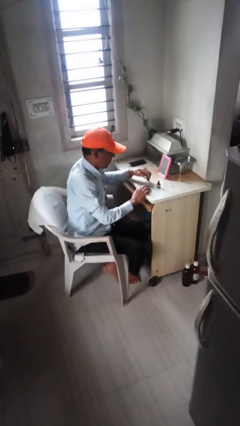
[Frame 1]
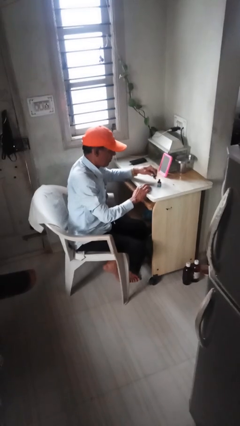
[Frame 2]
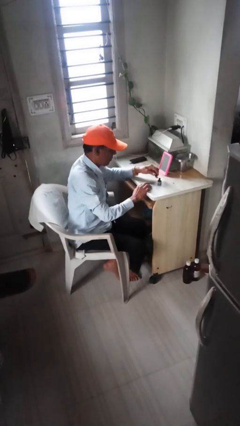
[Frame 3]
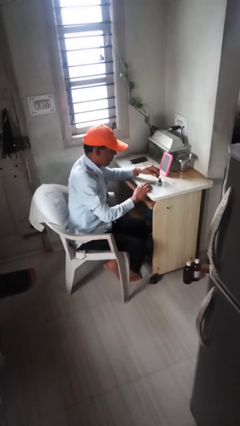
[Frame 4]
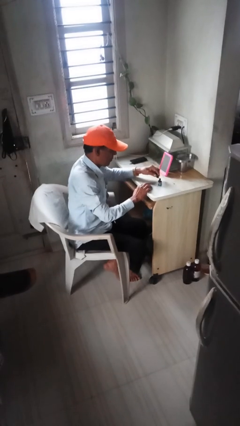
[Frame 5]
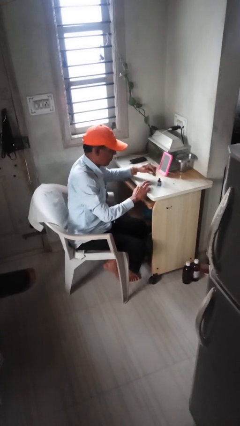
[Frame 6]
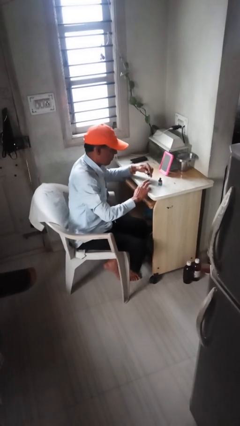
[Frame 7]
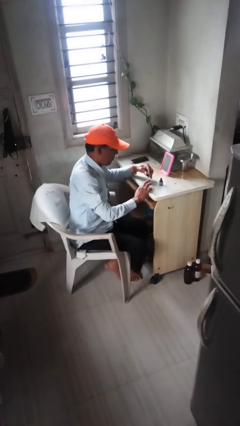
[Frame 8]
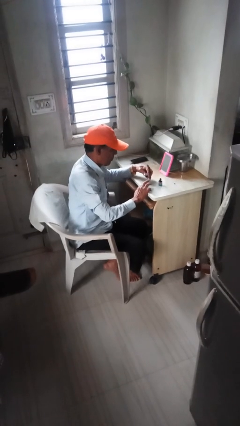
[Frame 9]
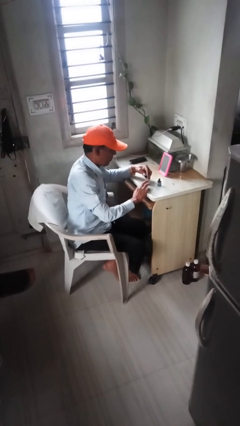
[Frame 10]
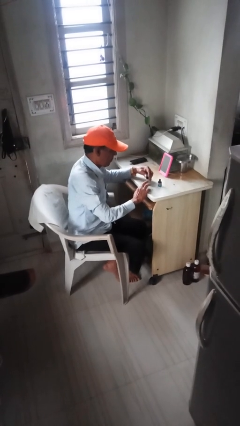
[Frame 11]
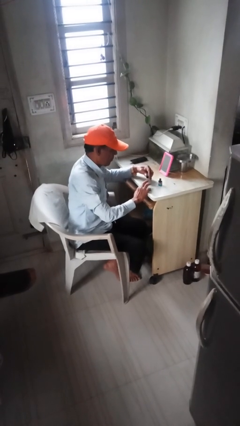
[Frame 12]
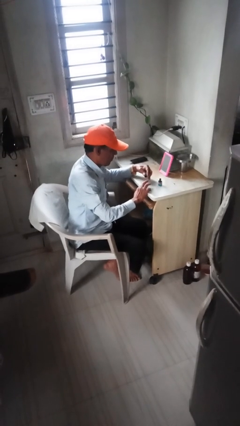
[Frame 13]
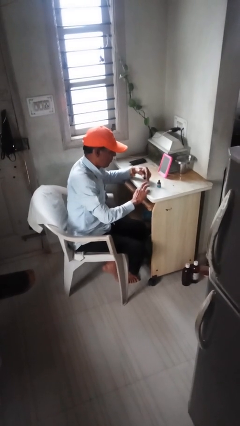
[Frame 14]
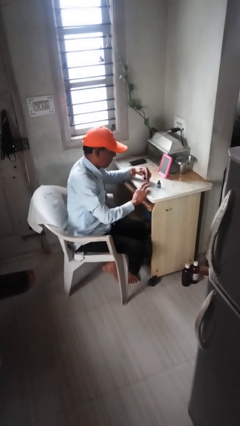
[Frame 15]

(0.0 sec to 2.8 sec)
person paints fingernails

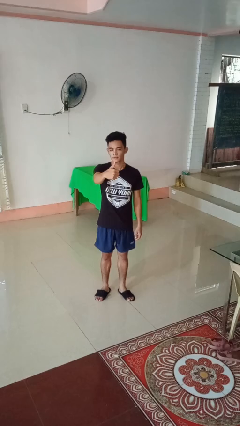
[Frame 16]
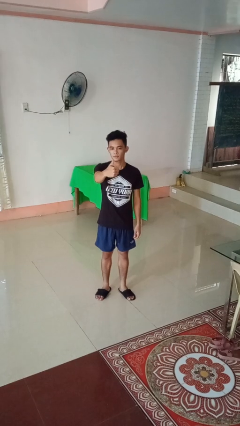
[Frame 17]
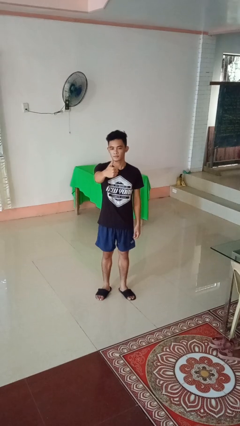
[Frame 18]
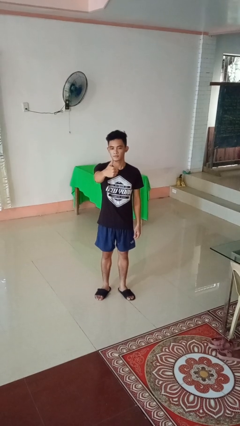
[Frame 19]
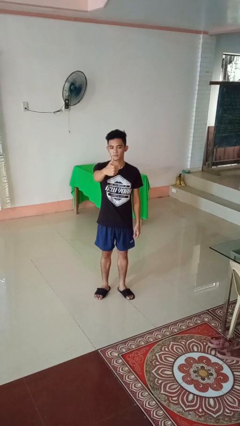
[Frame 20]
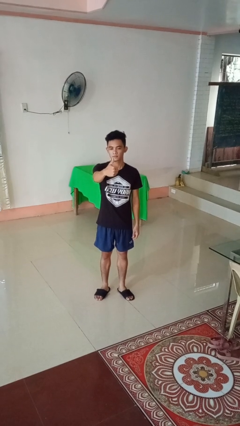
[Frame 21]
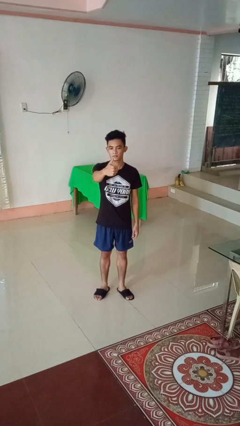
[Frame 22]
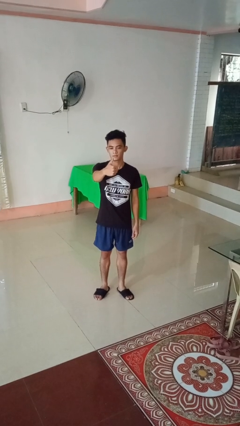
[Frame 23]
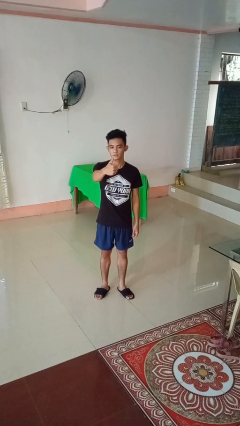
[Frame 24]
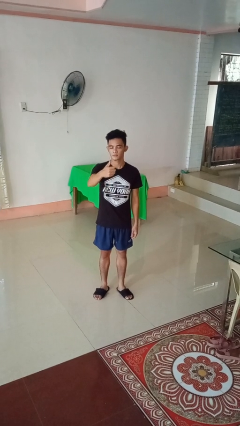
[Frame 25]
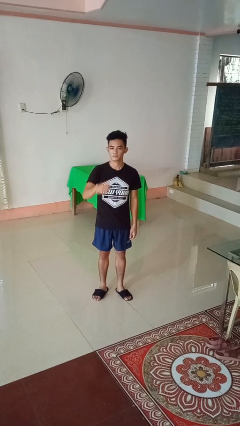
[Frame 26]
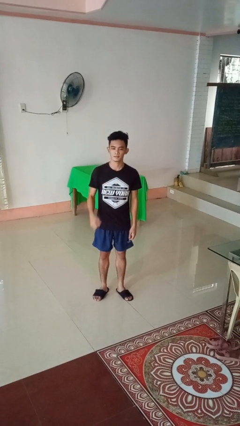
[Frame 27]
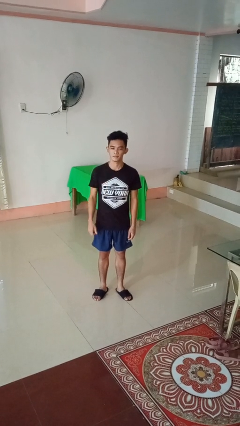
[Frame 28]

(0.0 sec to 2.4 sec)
person gestures thumbs up

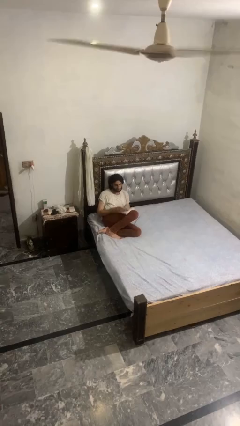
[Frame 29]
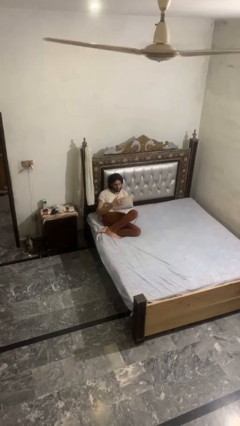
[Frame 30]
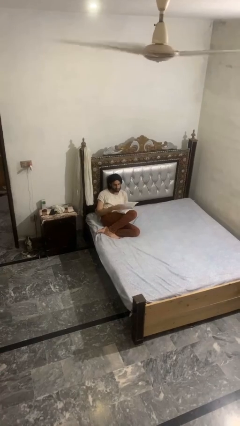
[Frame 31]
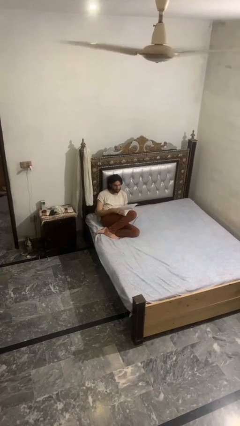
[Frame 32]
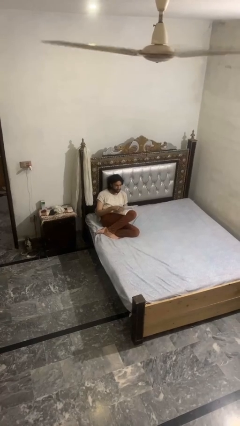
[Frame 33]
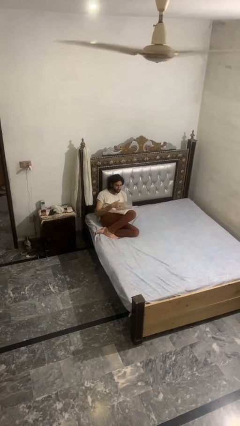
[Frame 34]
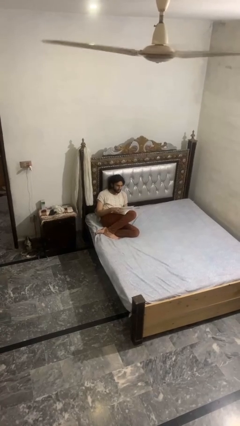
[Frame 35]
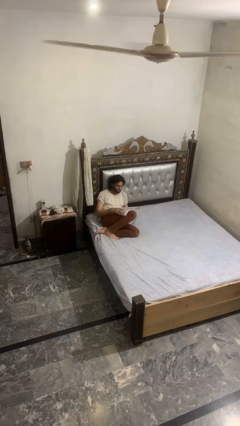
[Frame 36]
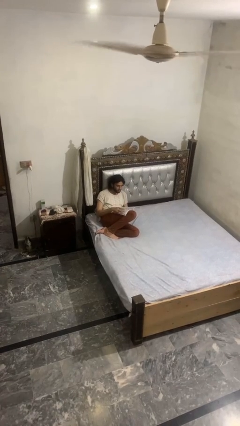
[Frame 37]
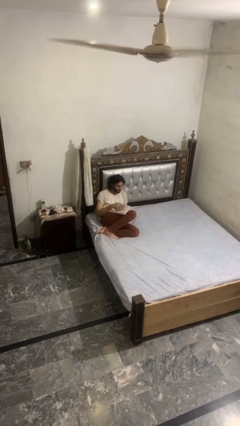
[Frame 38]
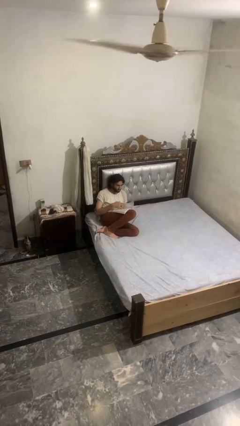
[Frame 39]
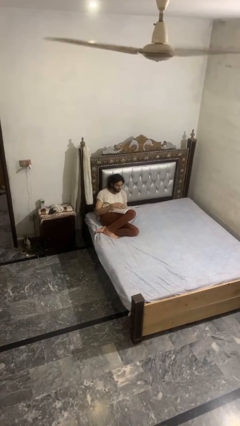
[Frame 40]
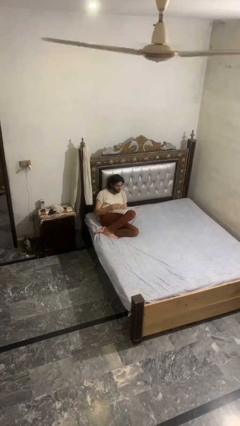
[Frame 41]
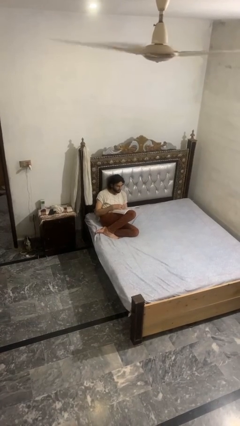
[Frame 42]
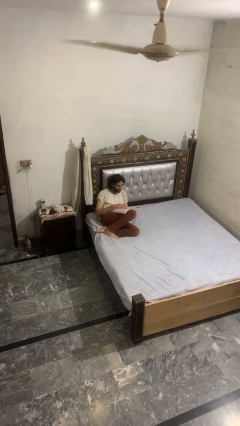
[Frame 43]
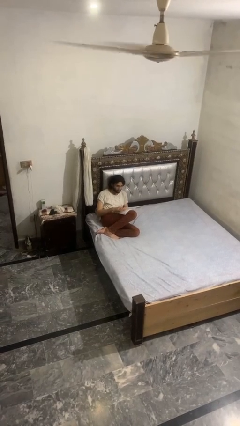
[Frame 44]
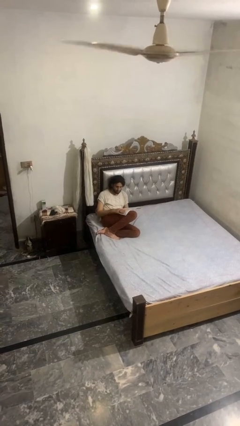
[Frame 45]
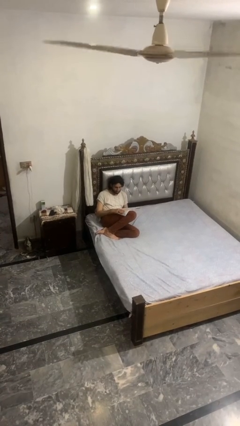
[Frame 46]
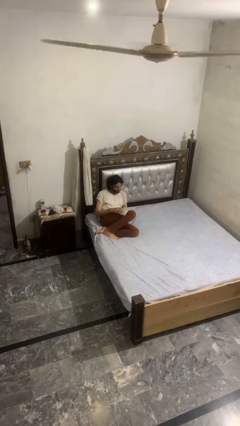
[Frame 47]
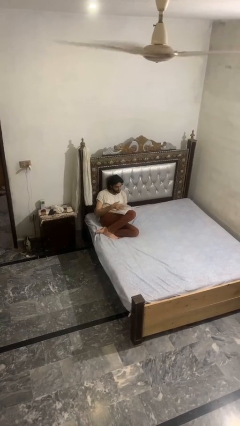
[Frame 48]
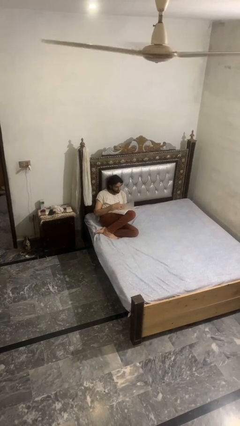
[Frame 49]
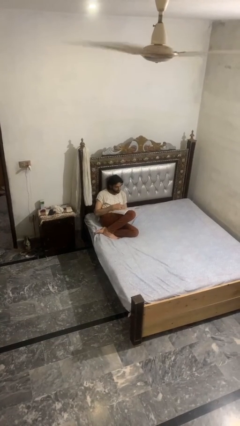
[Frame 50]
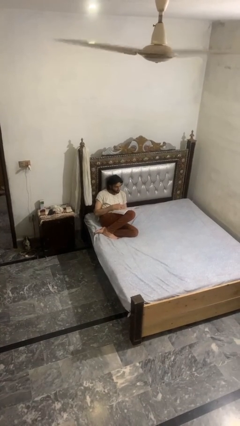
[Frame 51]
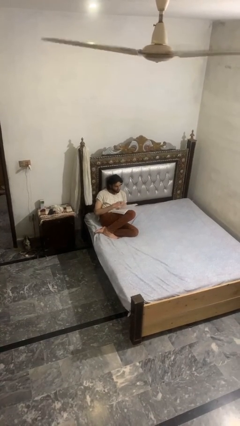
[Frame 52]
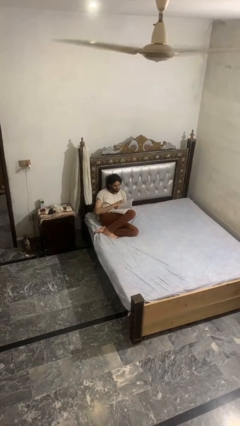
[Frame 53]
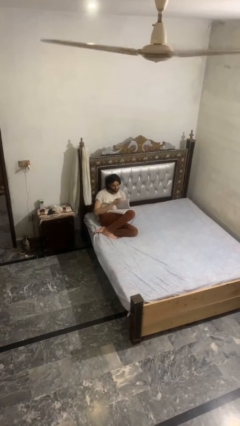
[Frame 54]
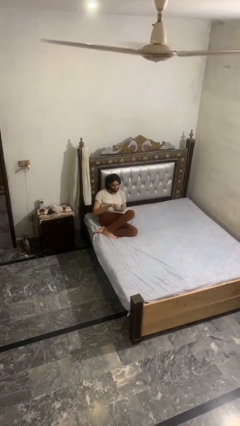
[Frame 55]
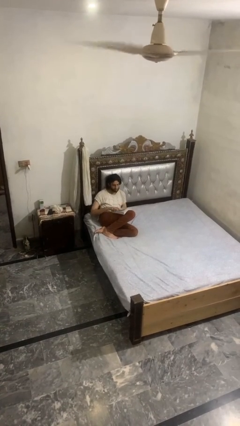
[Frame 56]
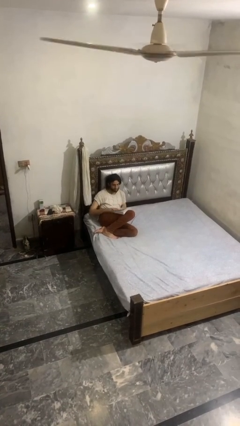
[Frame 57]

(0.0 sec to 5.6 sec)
person reads book

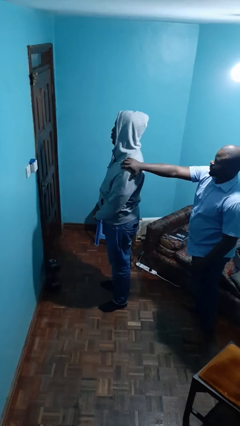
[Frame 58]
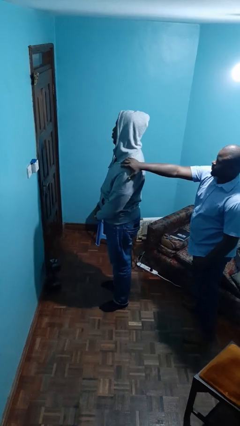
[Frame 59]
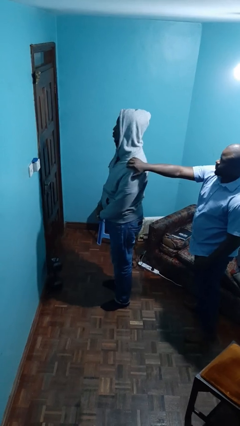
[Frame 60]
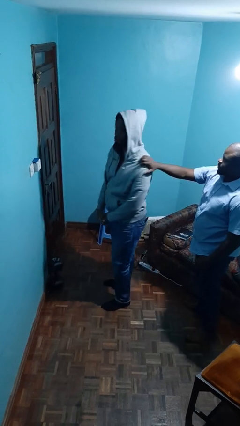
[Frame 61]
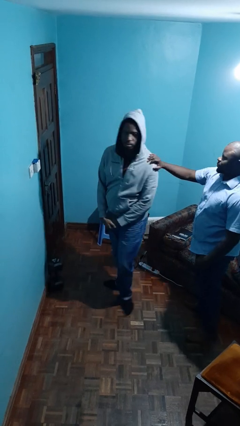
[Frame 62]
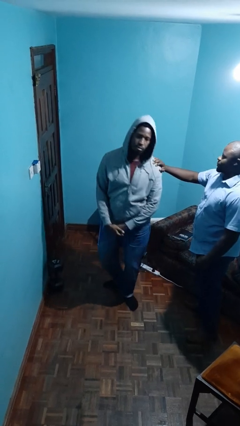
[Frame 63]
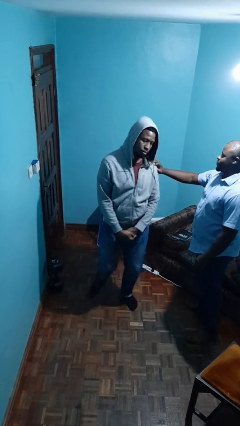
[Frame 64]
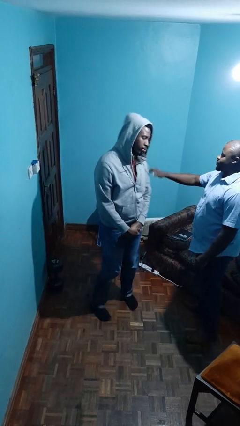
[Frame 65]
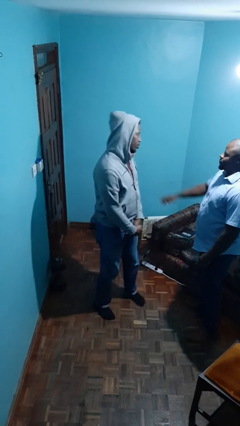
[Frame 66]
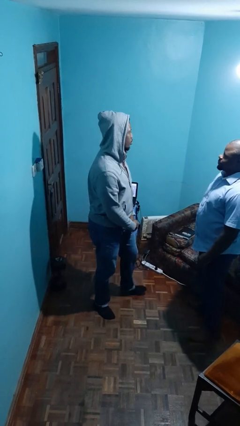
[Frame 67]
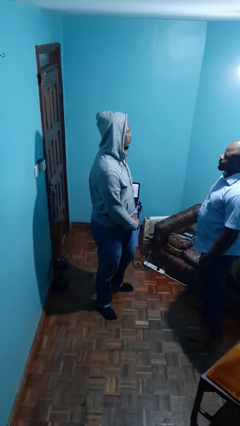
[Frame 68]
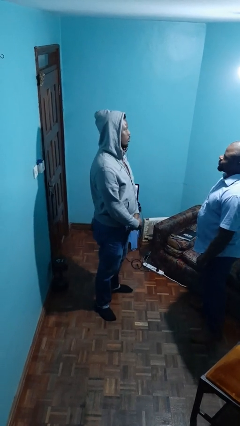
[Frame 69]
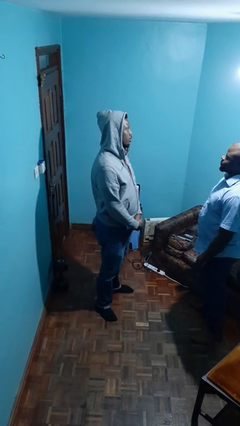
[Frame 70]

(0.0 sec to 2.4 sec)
person spins person around

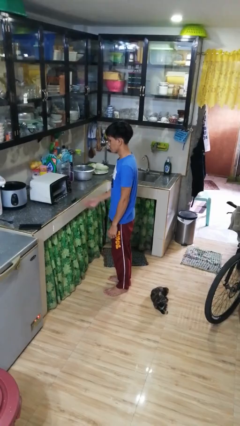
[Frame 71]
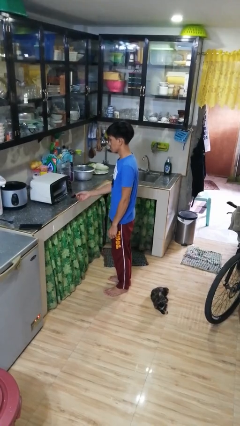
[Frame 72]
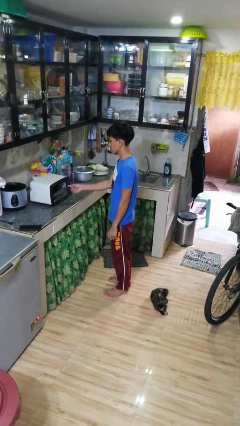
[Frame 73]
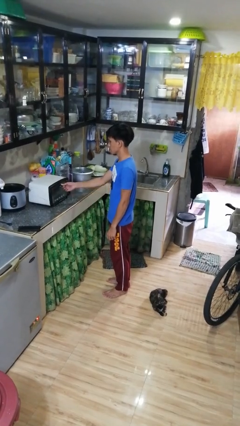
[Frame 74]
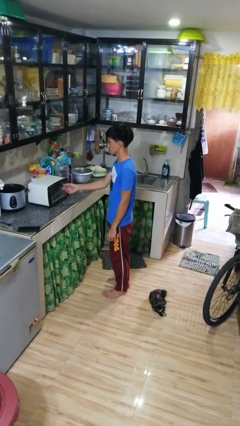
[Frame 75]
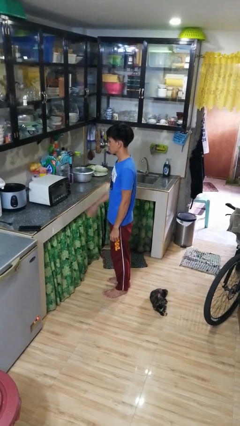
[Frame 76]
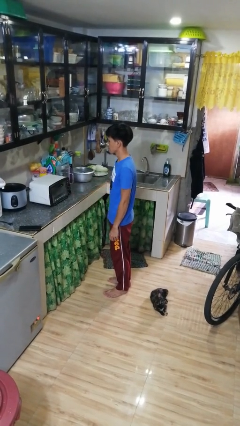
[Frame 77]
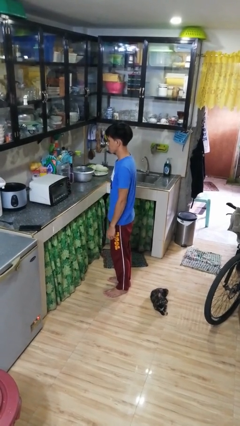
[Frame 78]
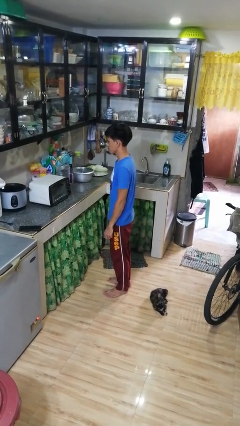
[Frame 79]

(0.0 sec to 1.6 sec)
person closes microwave

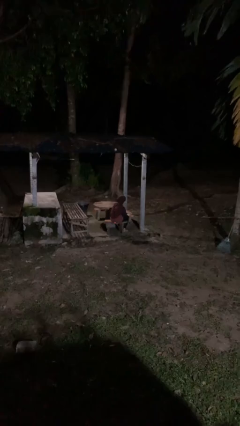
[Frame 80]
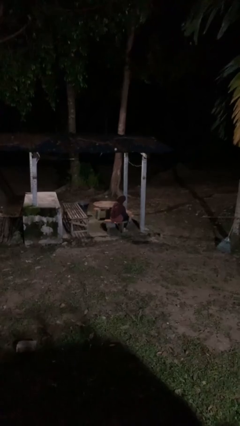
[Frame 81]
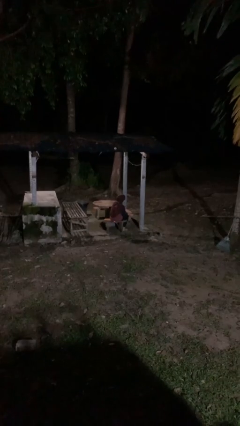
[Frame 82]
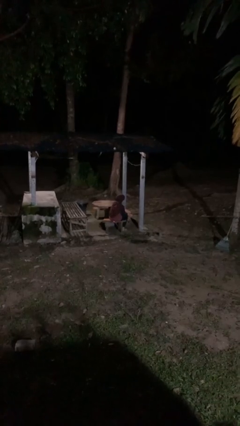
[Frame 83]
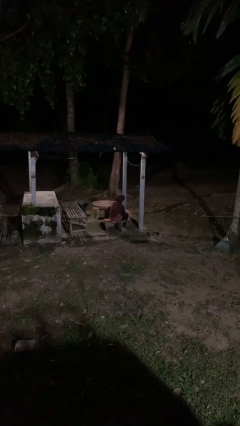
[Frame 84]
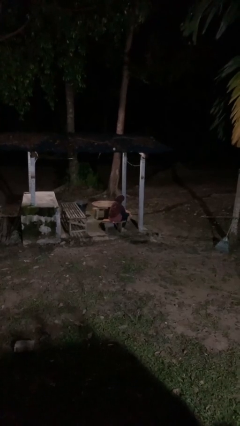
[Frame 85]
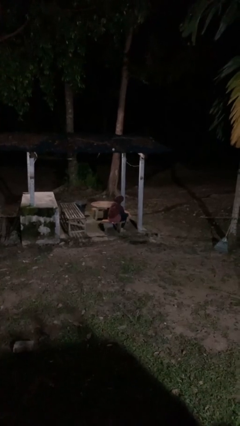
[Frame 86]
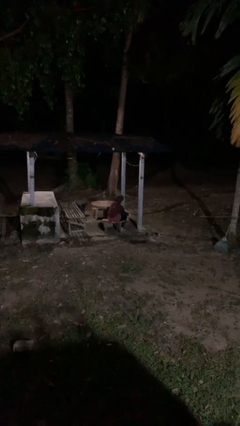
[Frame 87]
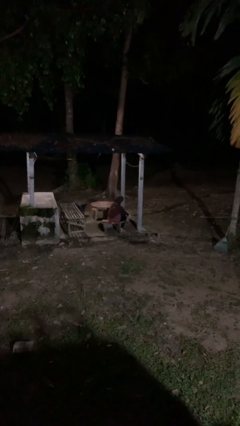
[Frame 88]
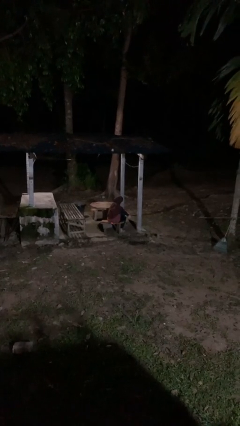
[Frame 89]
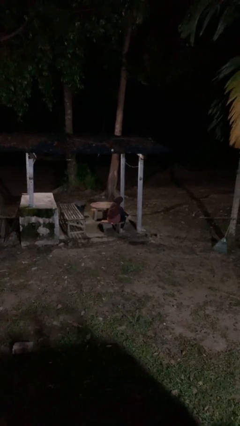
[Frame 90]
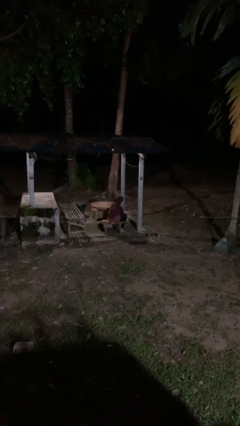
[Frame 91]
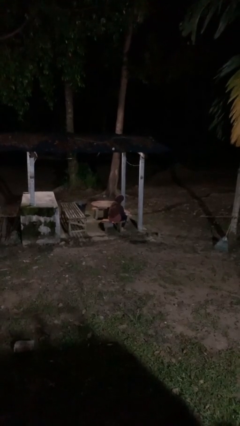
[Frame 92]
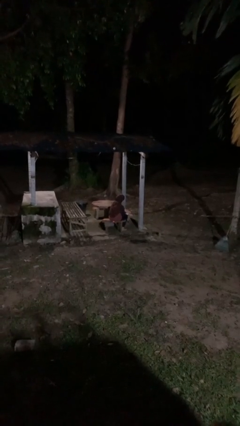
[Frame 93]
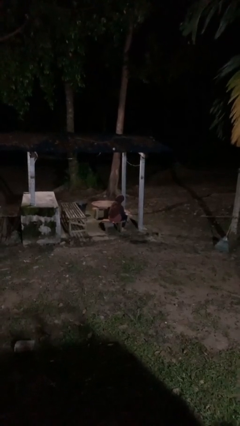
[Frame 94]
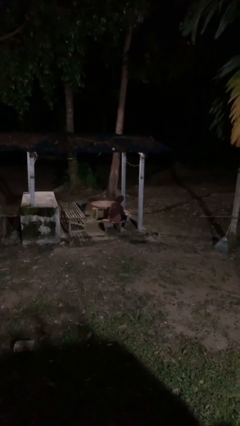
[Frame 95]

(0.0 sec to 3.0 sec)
person rubs foot
